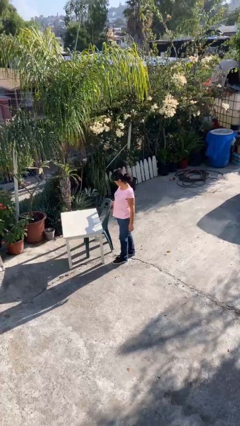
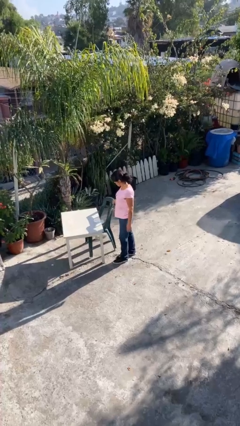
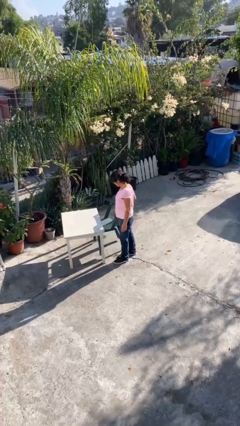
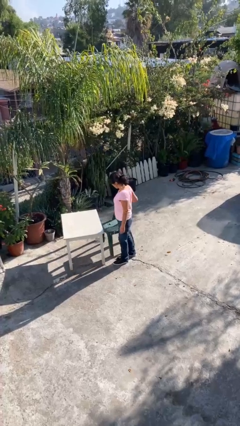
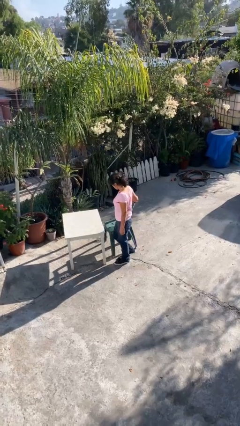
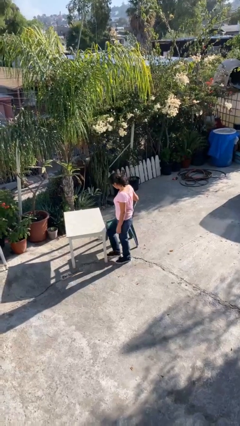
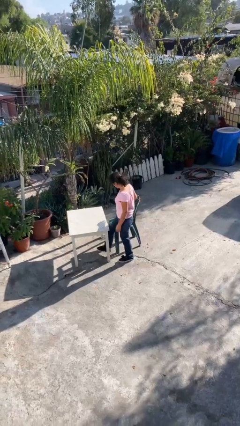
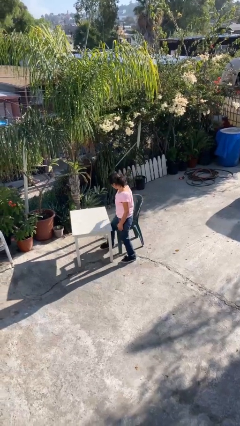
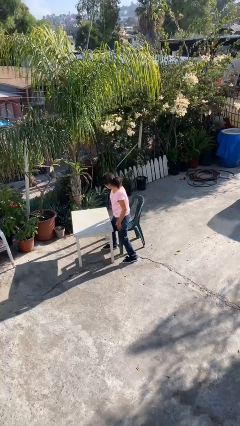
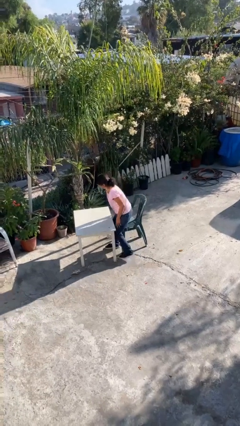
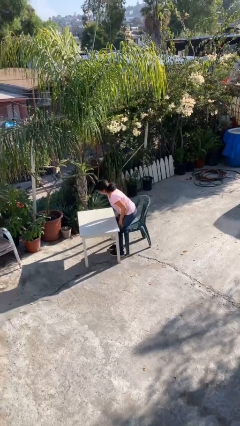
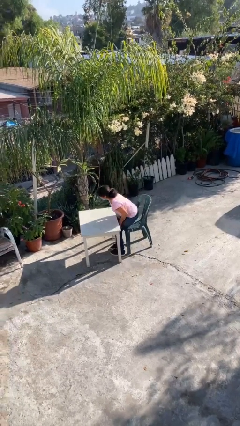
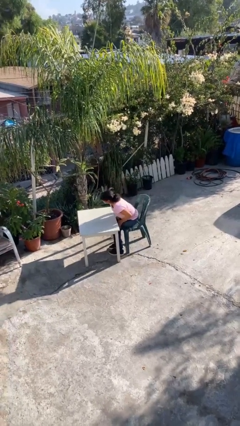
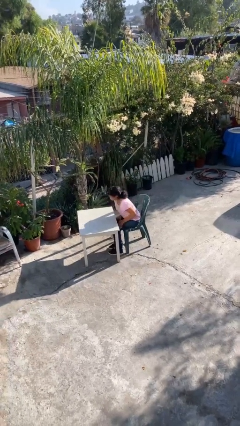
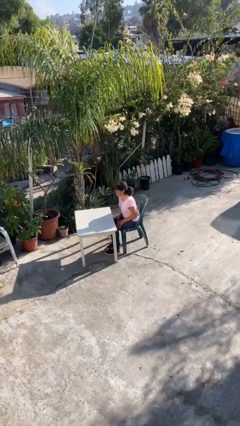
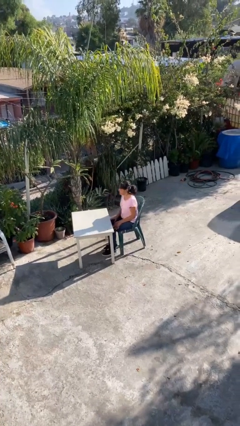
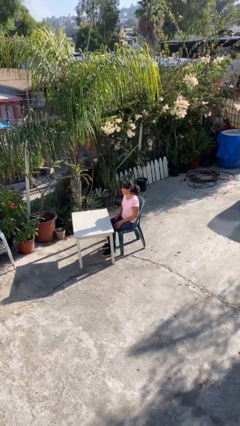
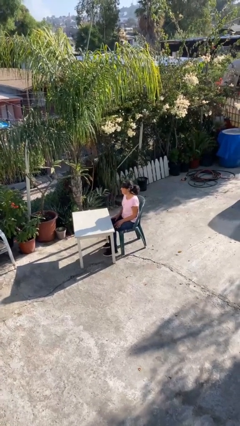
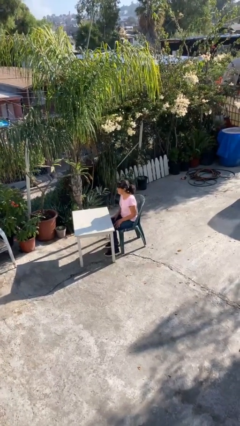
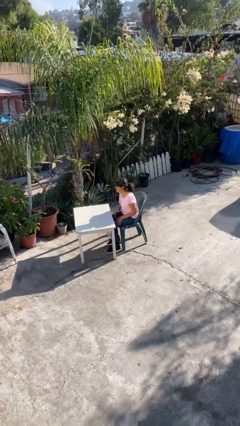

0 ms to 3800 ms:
person sits down

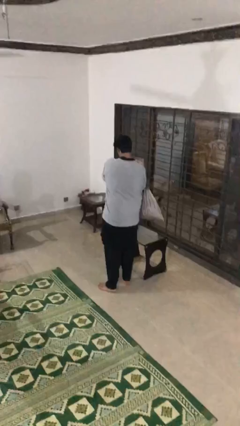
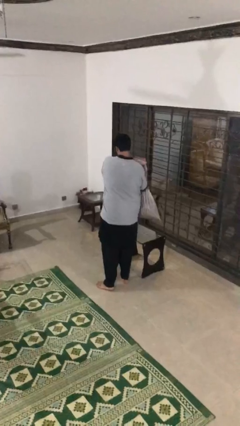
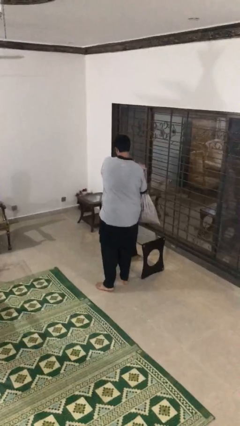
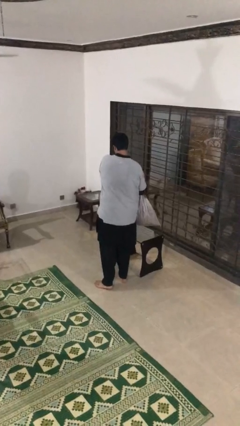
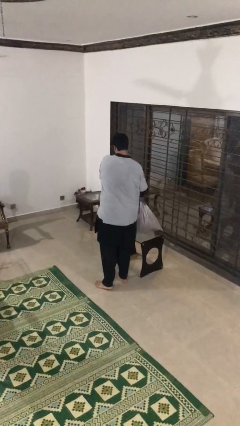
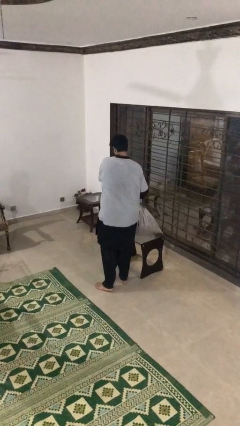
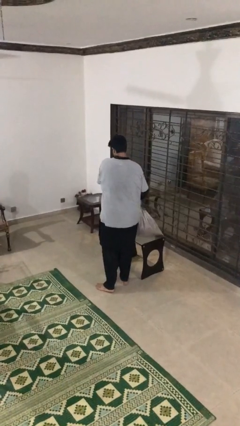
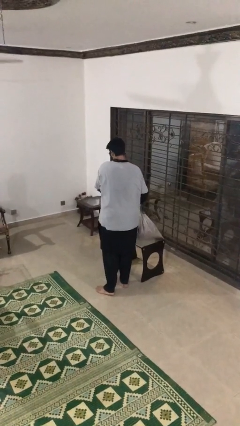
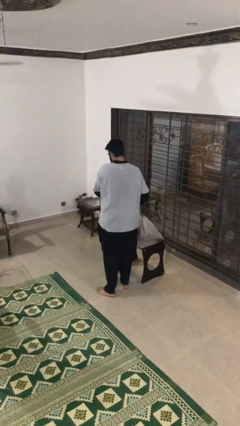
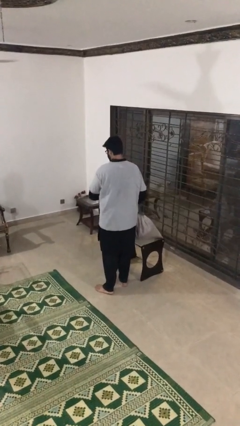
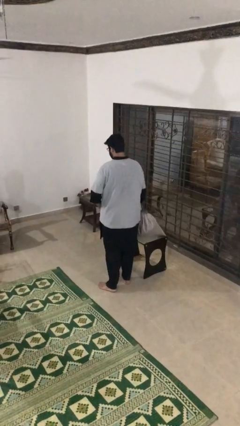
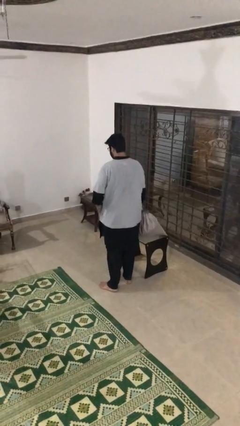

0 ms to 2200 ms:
person puts down object on table

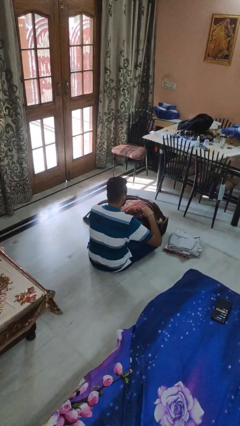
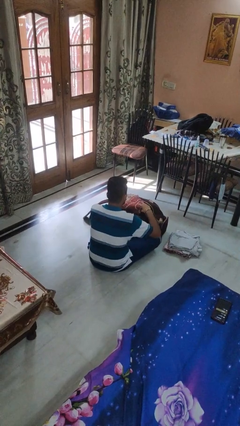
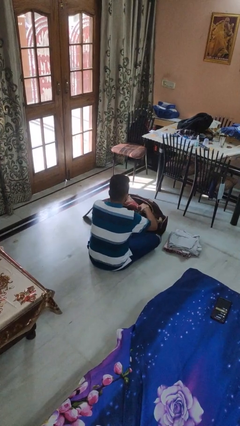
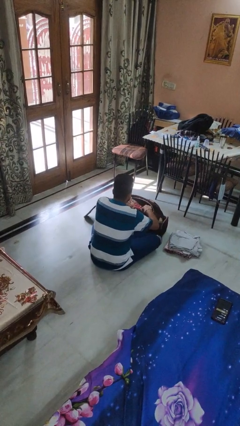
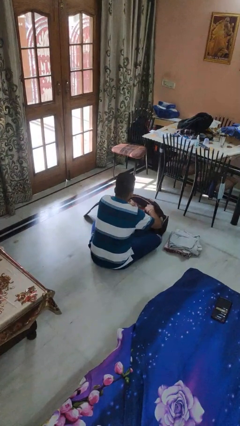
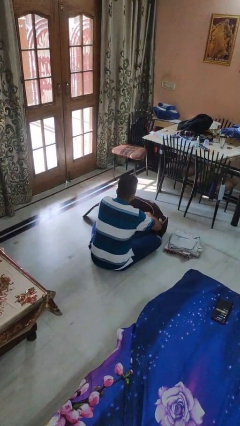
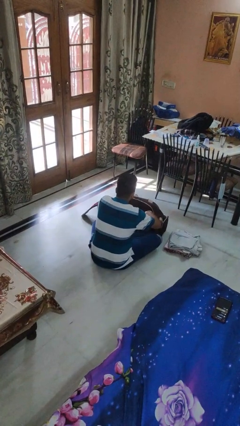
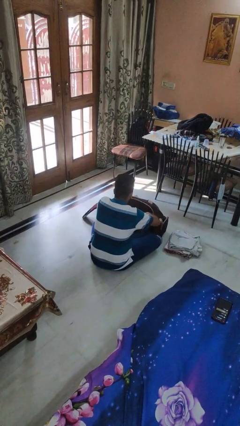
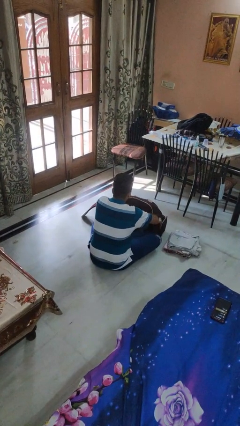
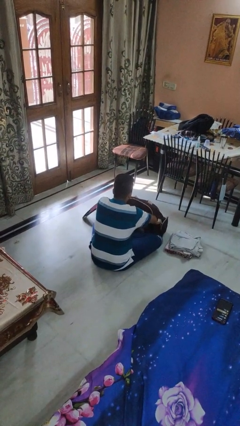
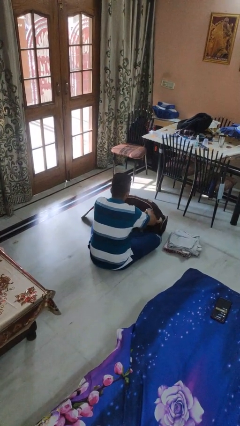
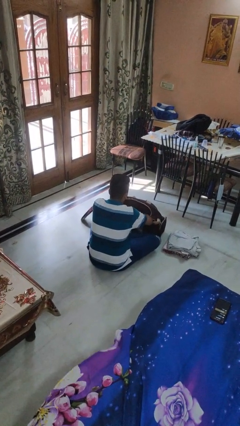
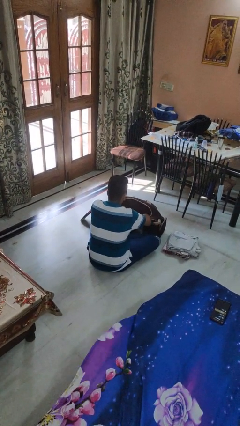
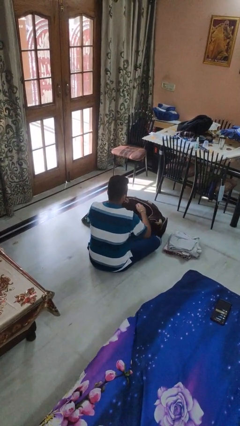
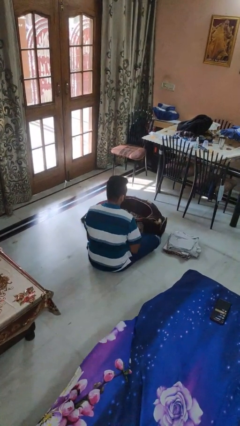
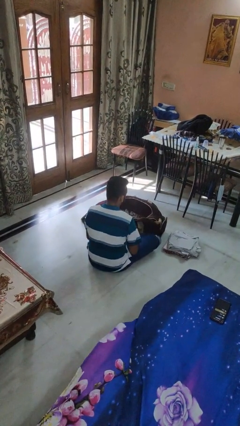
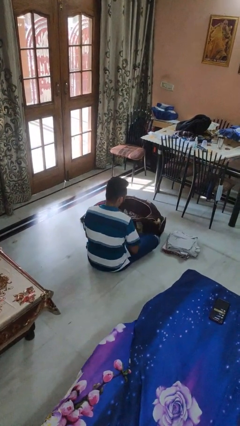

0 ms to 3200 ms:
person loads clothes into suitcase

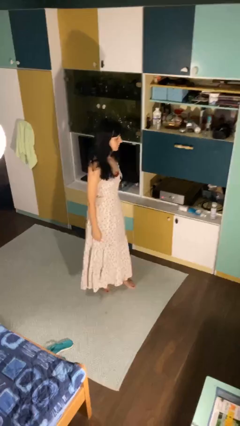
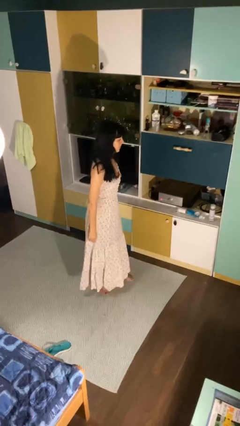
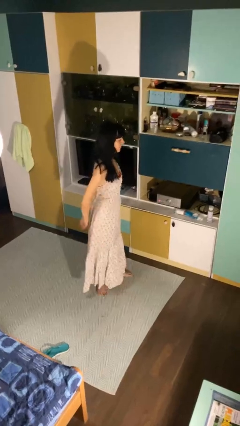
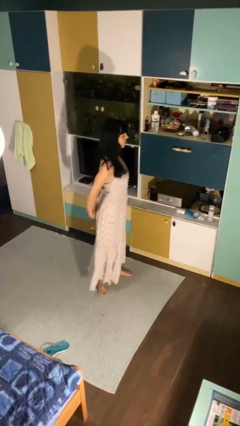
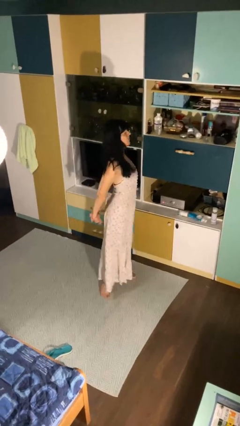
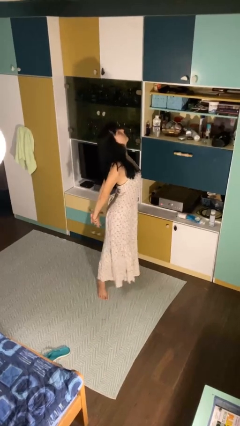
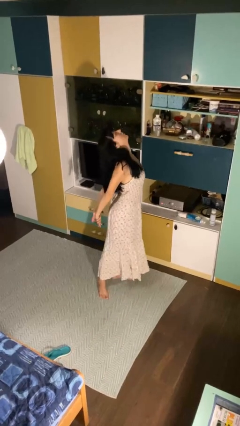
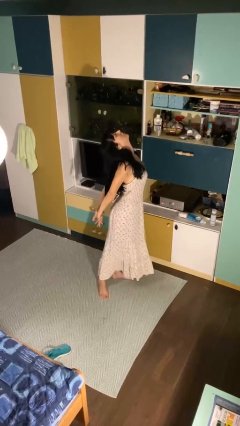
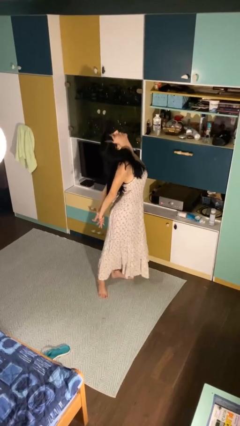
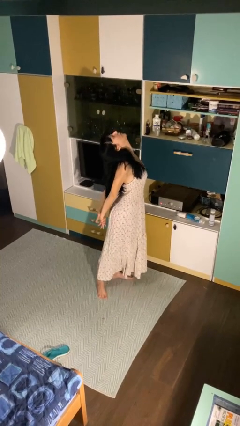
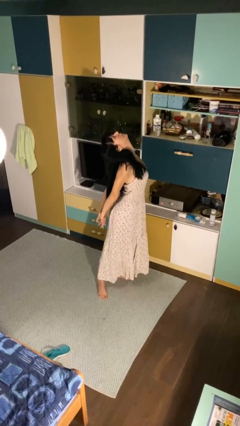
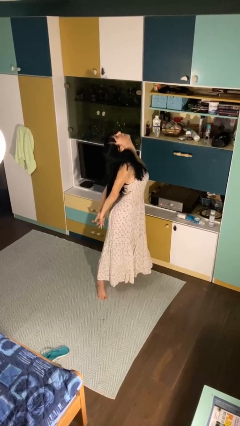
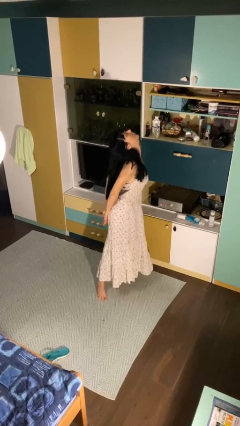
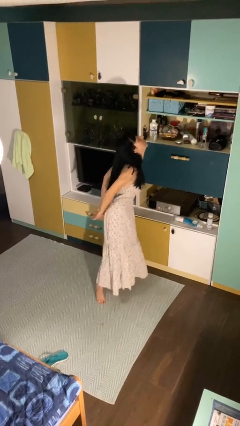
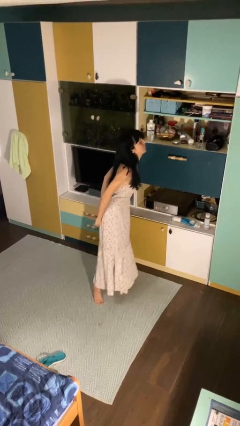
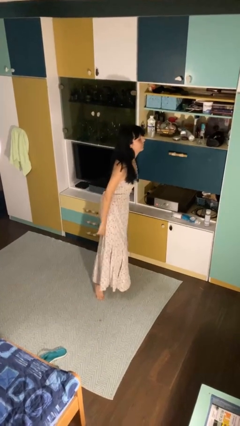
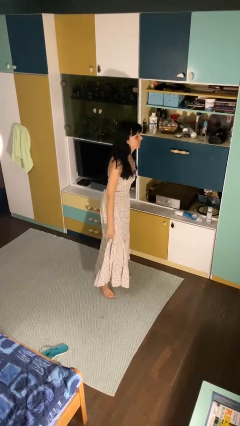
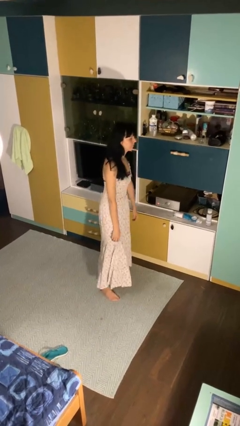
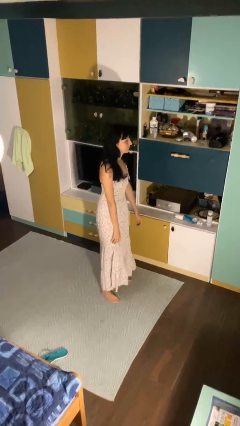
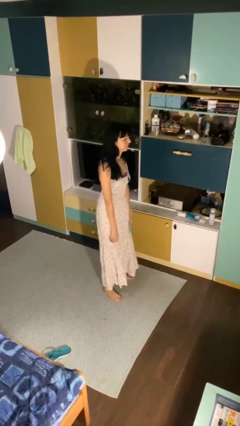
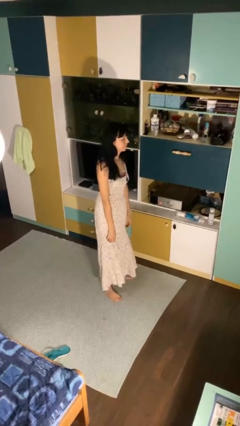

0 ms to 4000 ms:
person stretches back

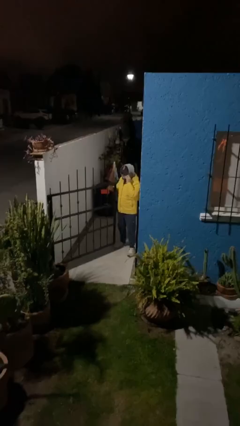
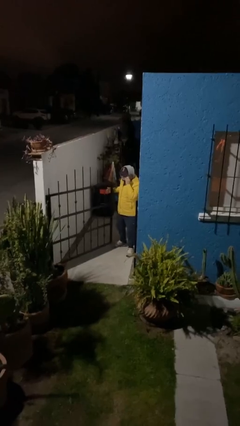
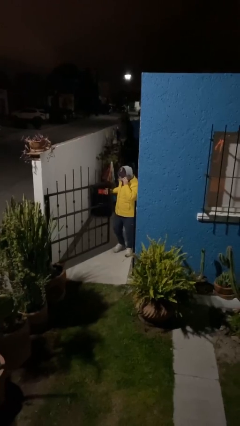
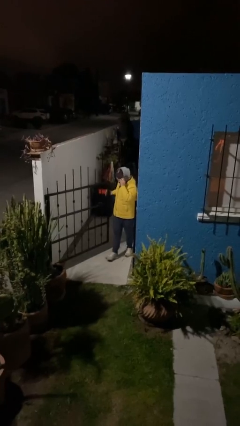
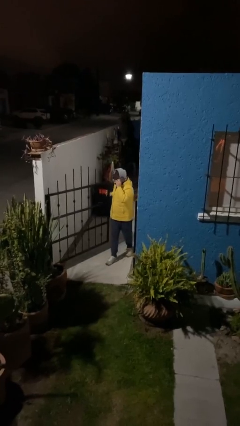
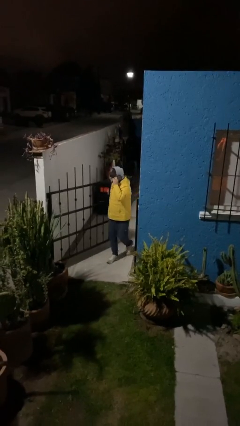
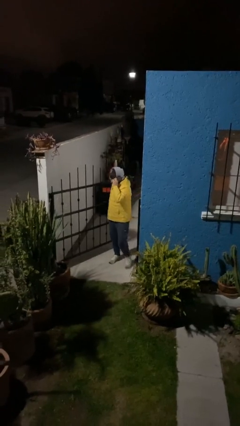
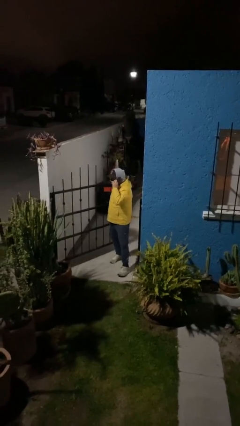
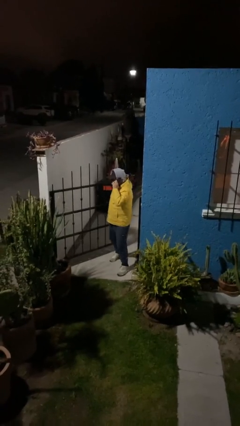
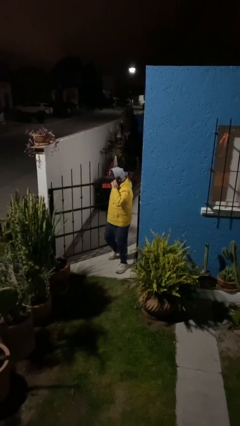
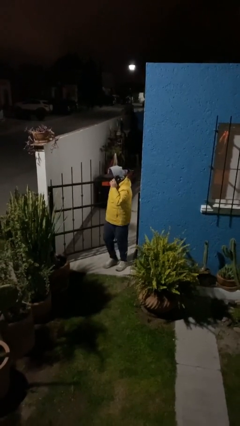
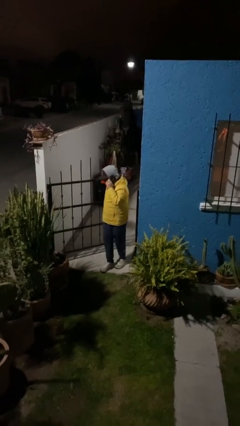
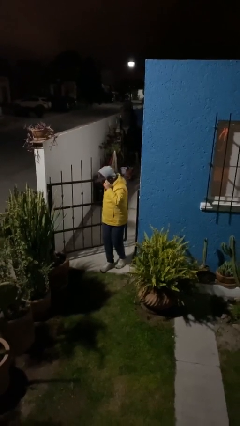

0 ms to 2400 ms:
person enters scene through structure

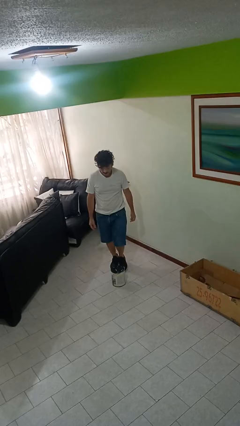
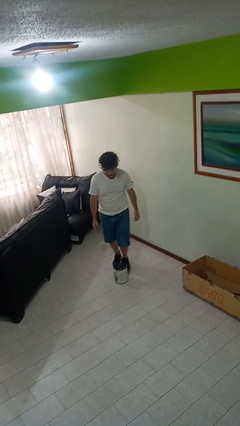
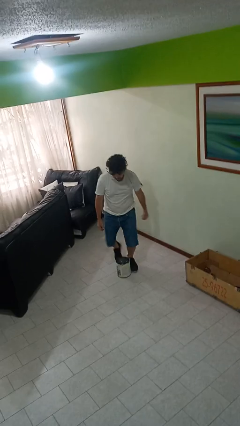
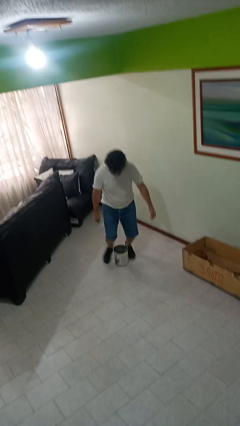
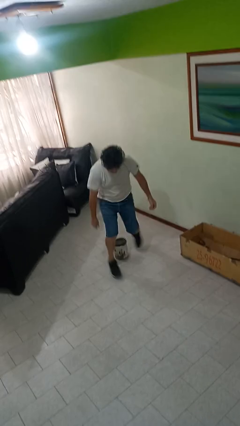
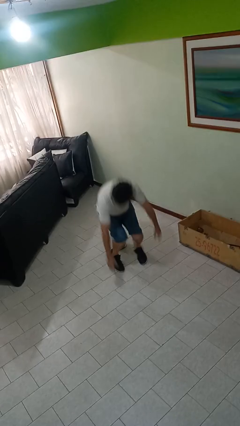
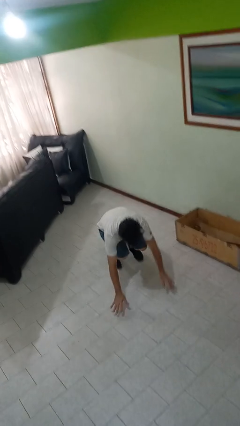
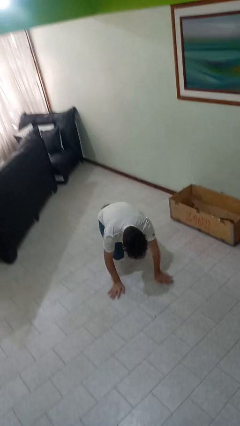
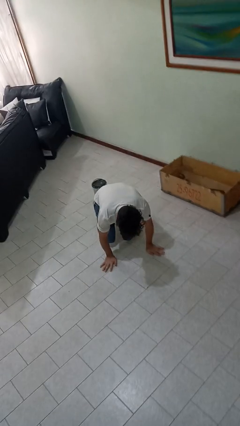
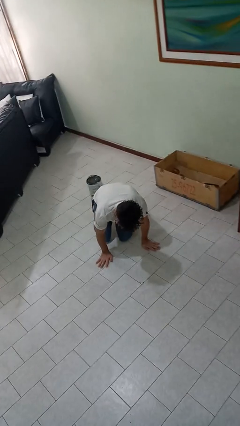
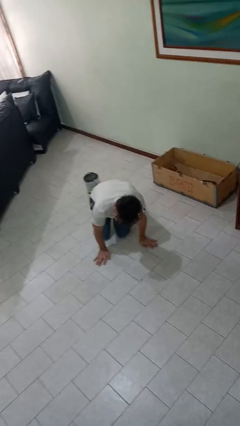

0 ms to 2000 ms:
person trips on object on floor
